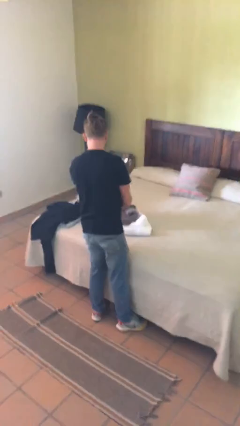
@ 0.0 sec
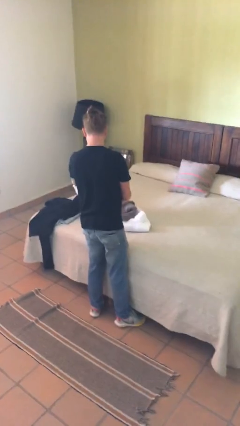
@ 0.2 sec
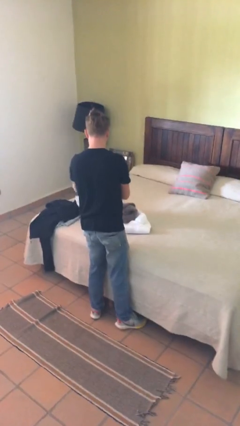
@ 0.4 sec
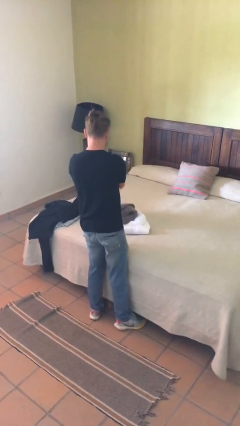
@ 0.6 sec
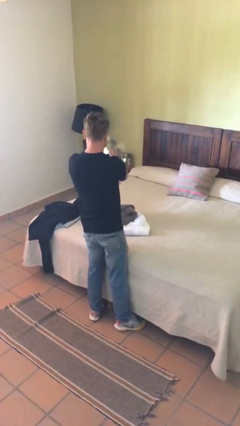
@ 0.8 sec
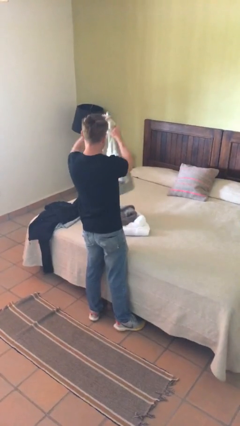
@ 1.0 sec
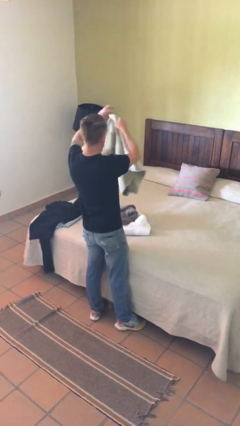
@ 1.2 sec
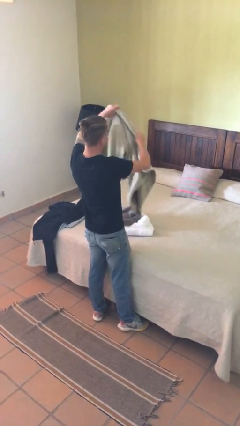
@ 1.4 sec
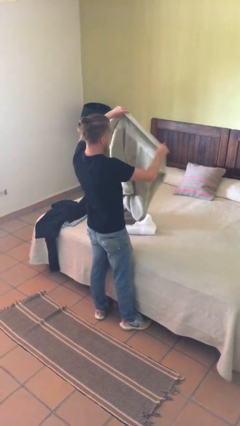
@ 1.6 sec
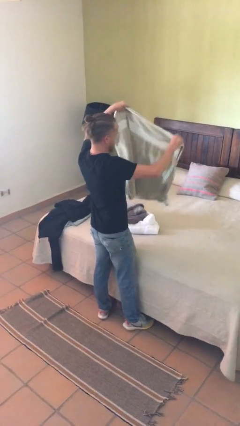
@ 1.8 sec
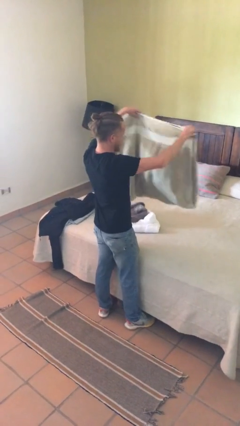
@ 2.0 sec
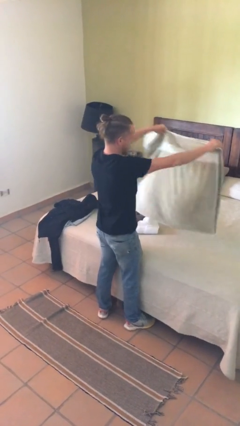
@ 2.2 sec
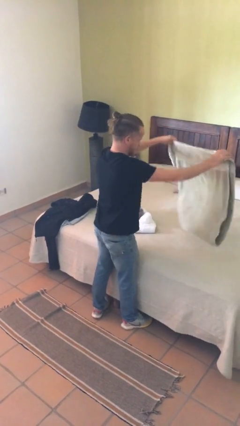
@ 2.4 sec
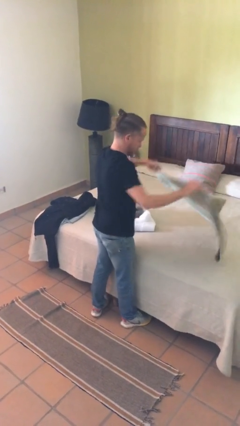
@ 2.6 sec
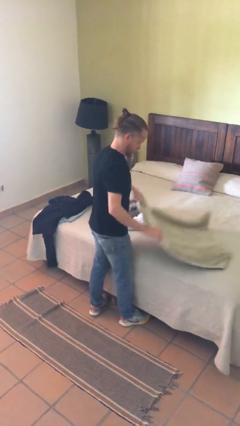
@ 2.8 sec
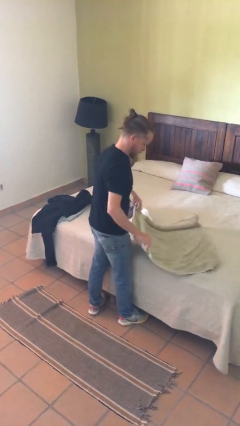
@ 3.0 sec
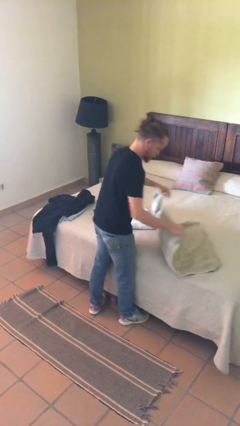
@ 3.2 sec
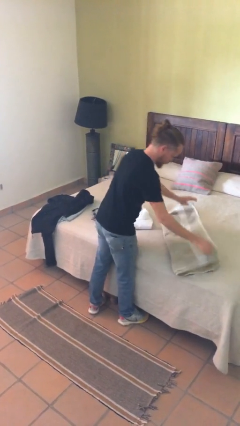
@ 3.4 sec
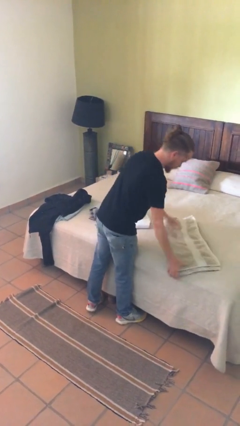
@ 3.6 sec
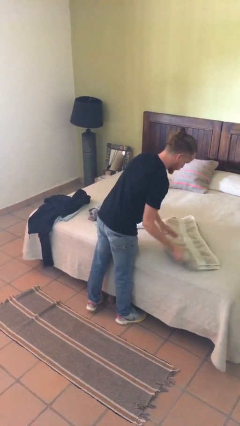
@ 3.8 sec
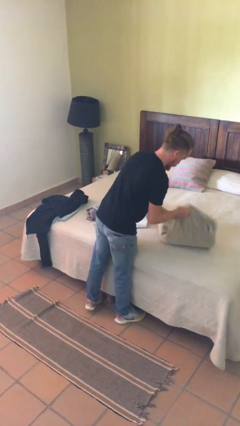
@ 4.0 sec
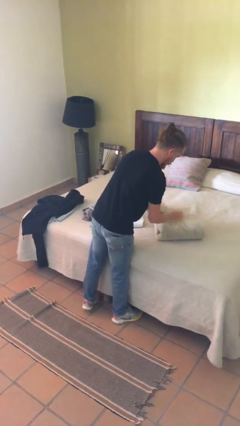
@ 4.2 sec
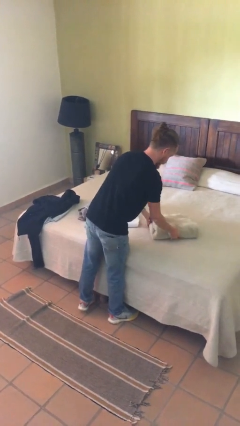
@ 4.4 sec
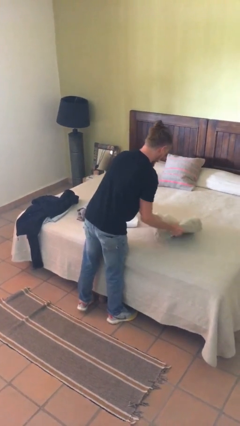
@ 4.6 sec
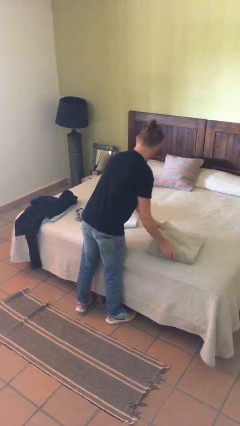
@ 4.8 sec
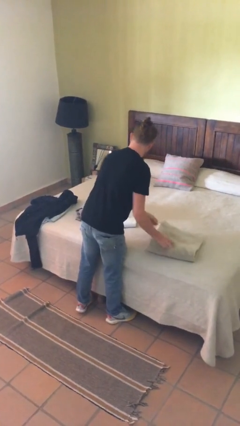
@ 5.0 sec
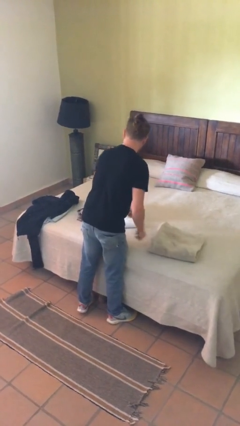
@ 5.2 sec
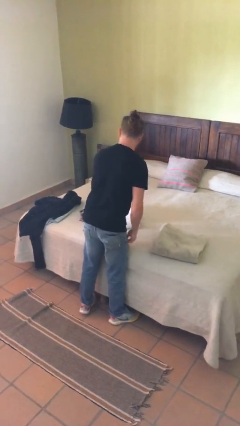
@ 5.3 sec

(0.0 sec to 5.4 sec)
person folds towel

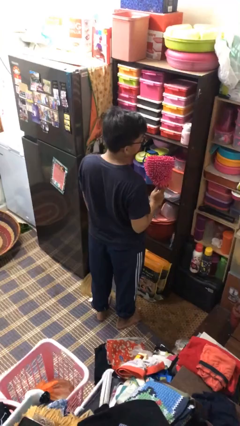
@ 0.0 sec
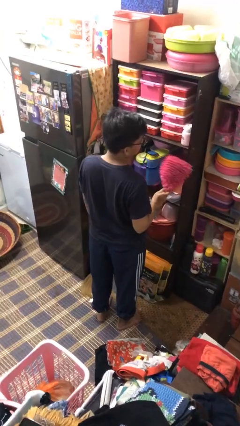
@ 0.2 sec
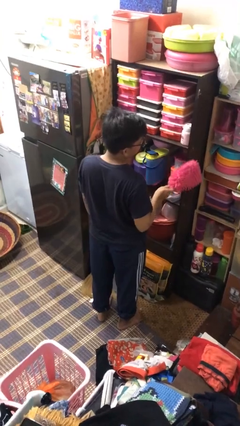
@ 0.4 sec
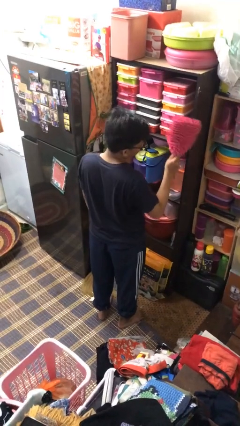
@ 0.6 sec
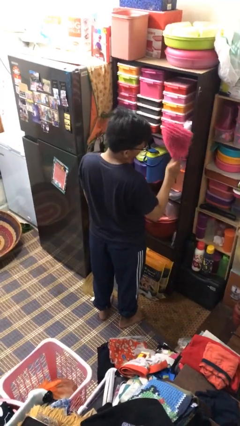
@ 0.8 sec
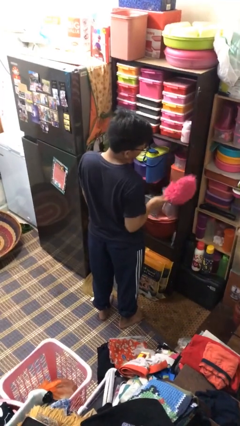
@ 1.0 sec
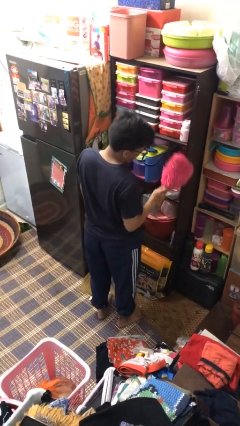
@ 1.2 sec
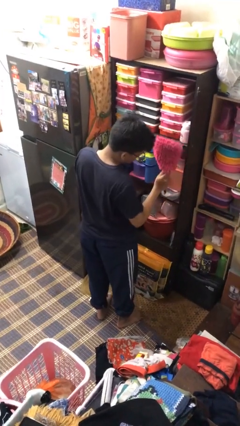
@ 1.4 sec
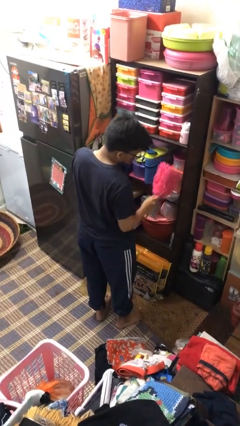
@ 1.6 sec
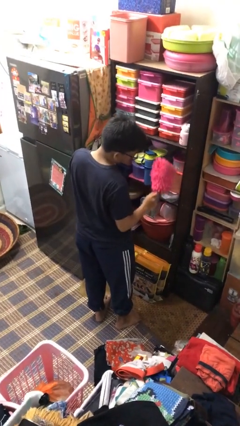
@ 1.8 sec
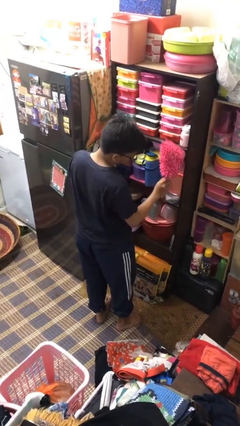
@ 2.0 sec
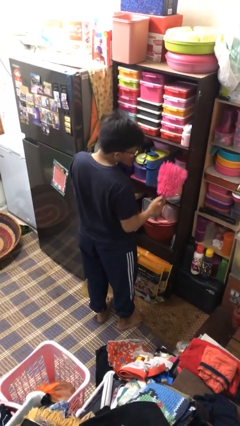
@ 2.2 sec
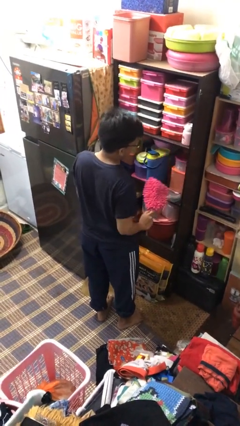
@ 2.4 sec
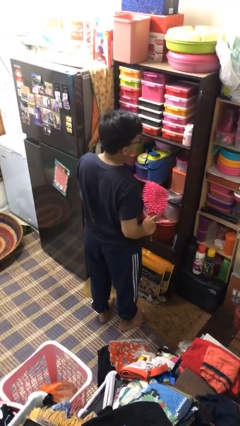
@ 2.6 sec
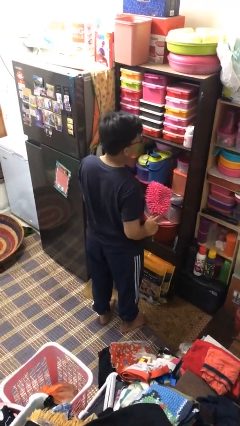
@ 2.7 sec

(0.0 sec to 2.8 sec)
person dusts furniture

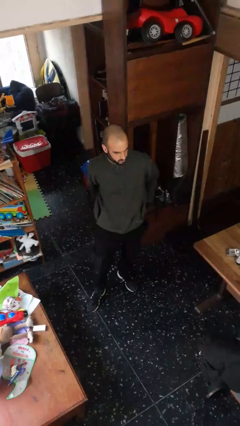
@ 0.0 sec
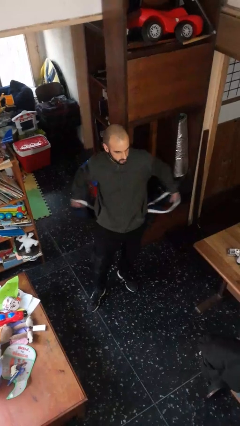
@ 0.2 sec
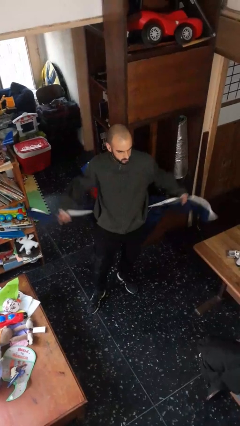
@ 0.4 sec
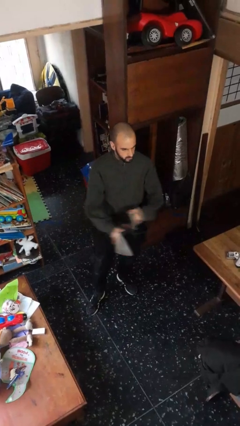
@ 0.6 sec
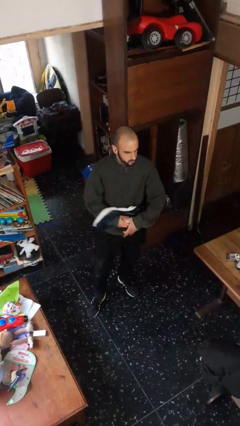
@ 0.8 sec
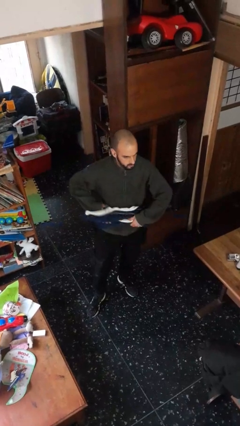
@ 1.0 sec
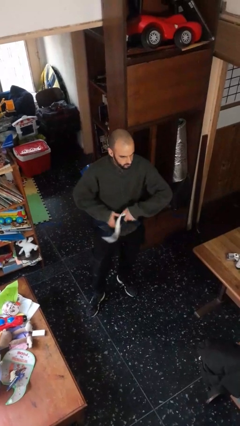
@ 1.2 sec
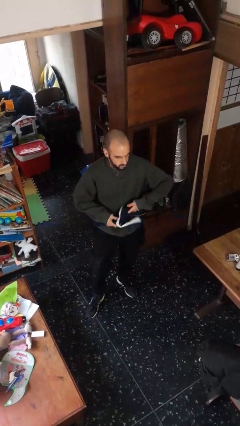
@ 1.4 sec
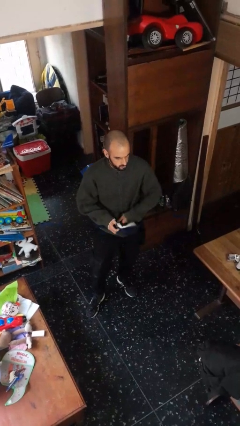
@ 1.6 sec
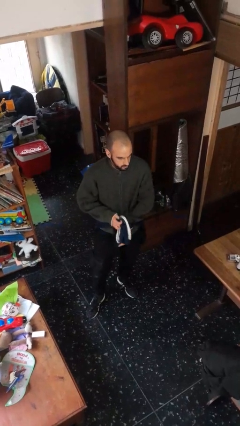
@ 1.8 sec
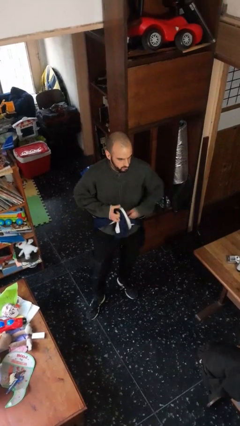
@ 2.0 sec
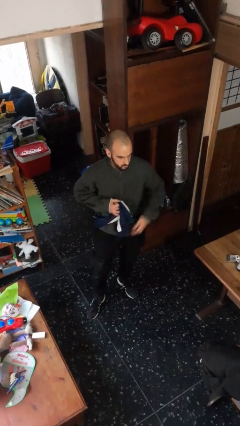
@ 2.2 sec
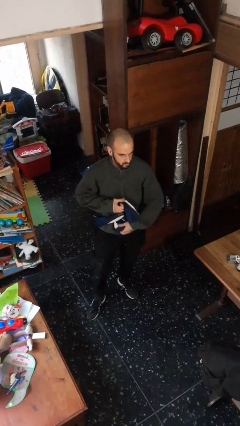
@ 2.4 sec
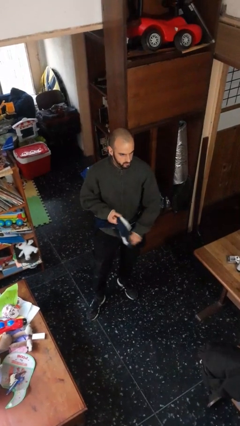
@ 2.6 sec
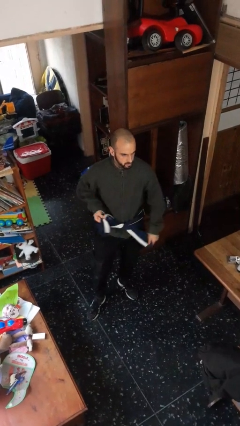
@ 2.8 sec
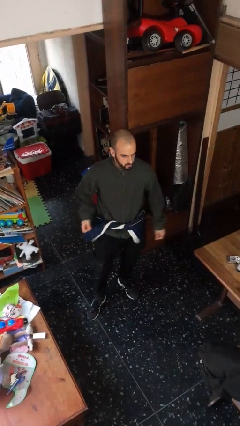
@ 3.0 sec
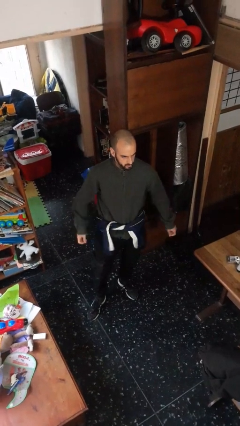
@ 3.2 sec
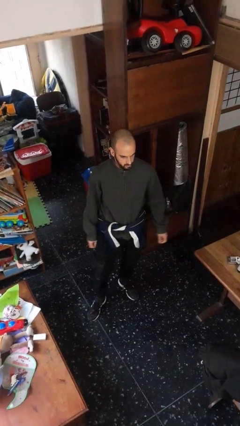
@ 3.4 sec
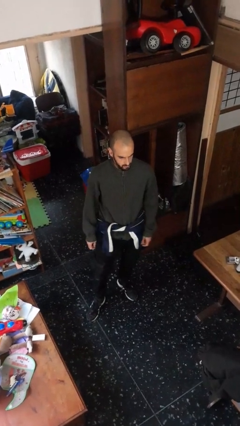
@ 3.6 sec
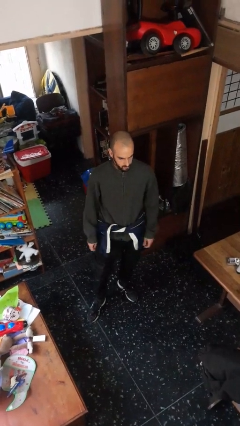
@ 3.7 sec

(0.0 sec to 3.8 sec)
person ties jacket around waist

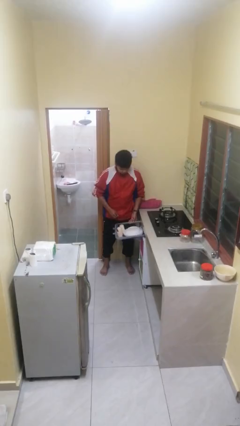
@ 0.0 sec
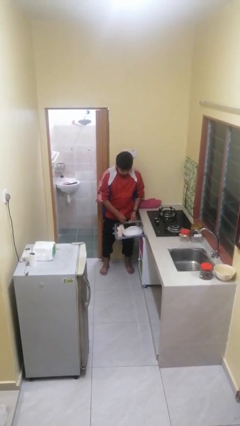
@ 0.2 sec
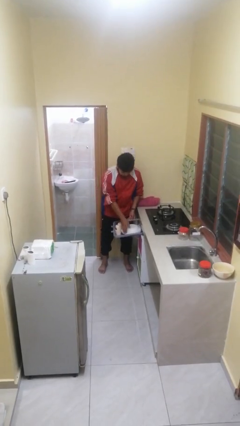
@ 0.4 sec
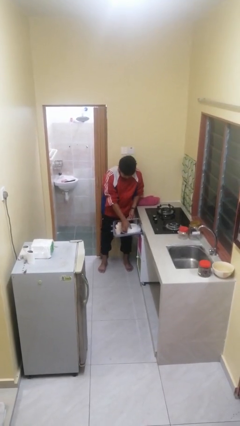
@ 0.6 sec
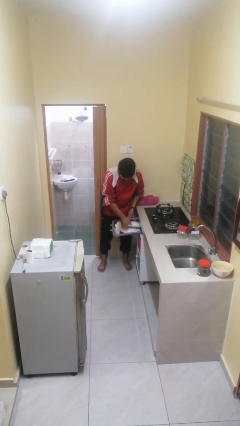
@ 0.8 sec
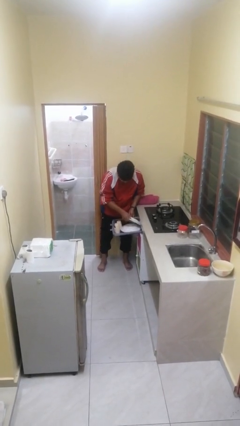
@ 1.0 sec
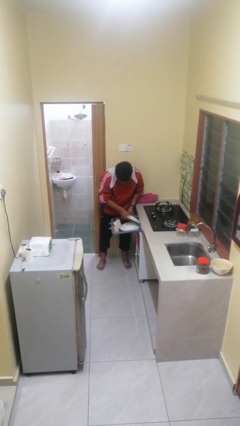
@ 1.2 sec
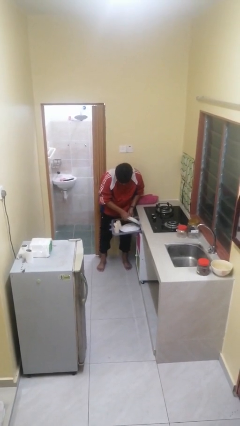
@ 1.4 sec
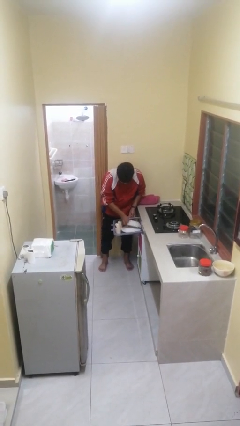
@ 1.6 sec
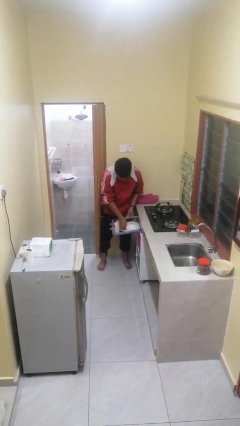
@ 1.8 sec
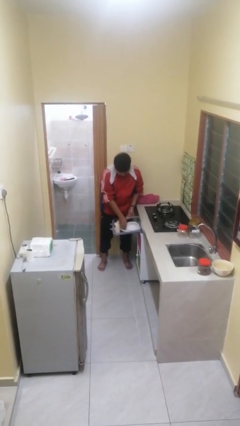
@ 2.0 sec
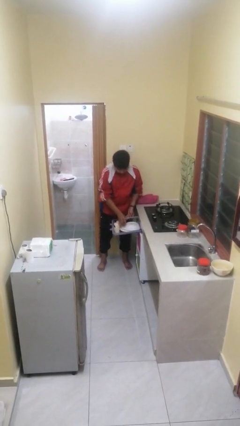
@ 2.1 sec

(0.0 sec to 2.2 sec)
person searches in kitchen drawer

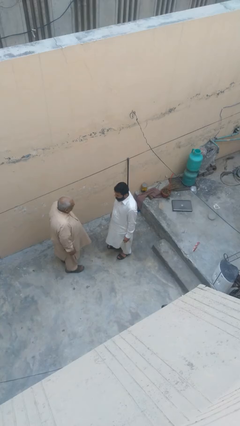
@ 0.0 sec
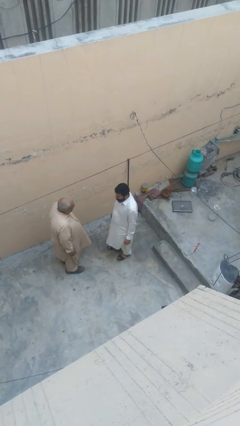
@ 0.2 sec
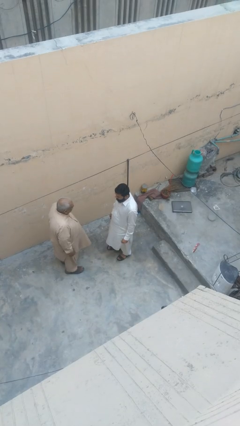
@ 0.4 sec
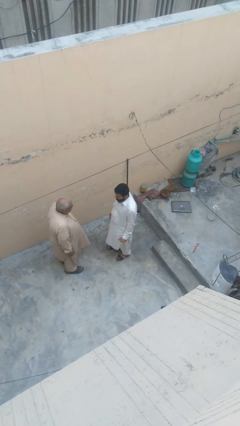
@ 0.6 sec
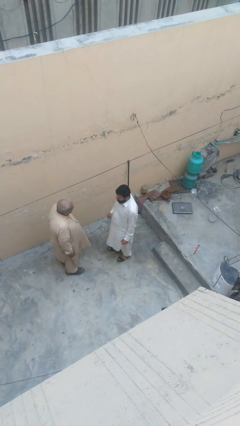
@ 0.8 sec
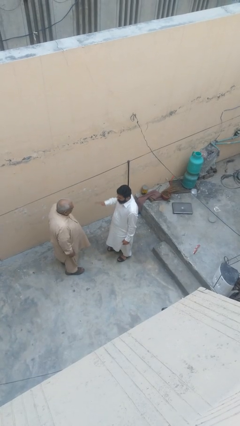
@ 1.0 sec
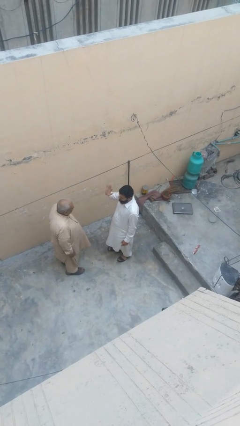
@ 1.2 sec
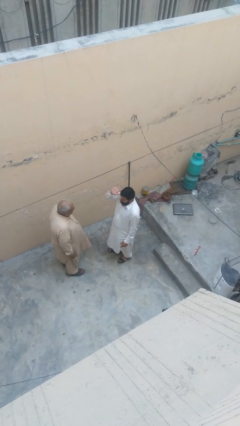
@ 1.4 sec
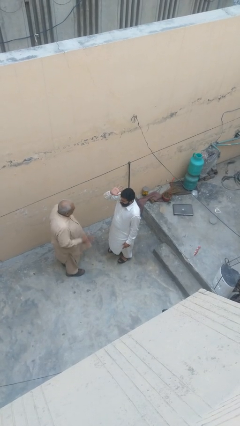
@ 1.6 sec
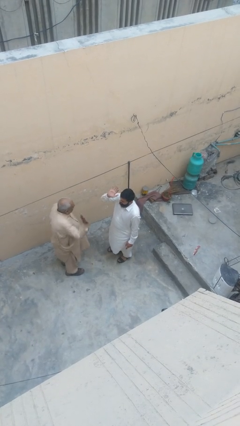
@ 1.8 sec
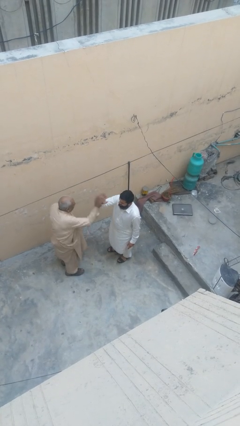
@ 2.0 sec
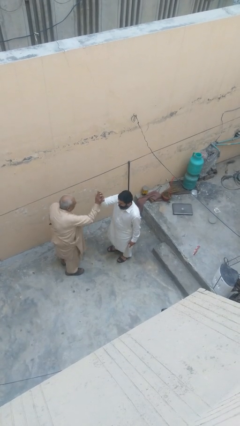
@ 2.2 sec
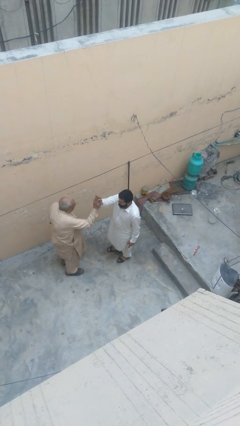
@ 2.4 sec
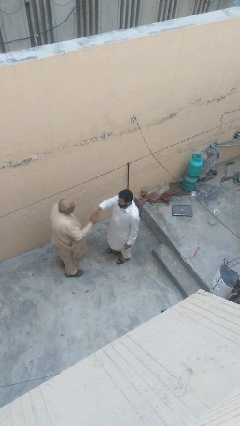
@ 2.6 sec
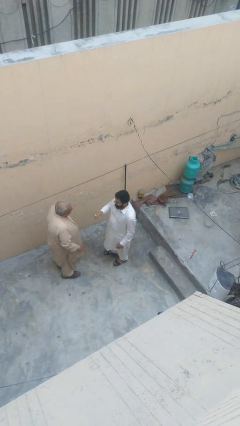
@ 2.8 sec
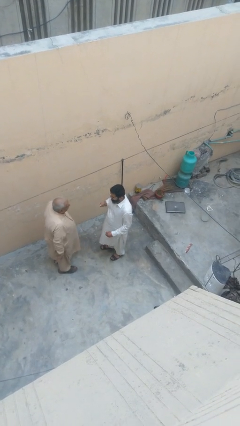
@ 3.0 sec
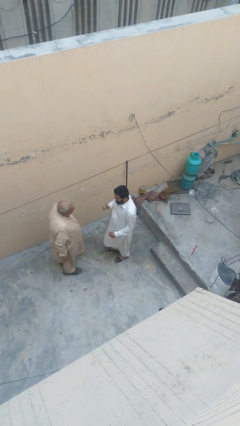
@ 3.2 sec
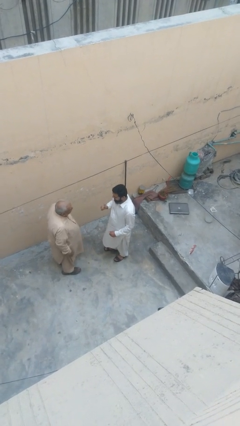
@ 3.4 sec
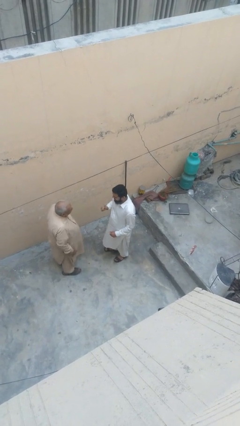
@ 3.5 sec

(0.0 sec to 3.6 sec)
person highfives hand
